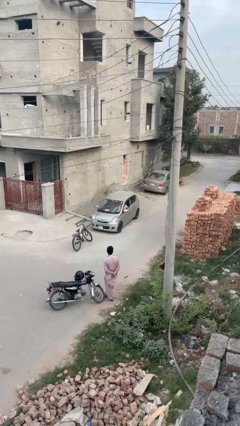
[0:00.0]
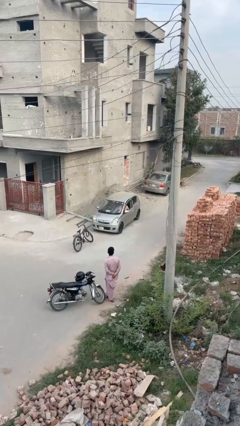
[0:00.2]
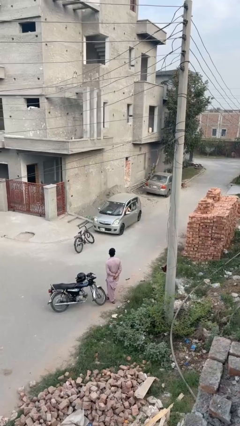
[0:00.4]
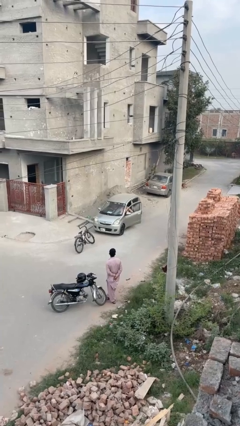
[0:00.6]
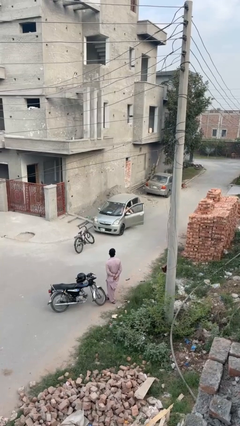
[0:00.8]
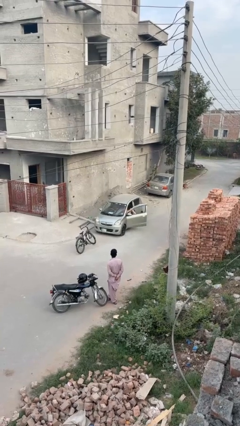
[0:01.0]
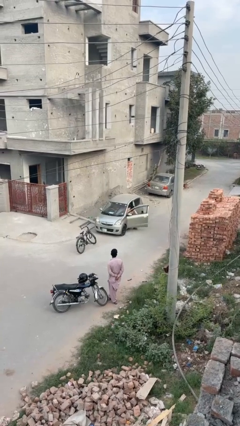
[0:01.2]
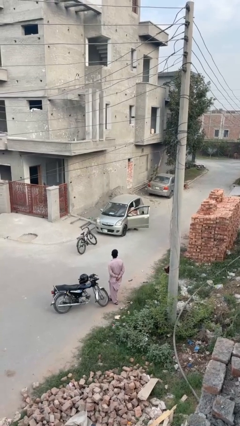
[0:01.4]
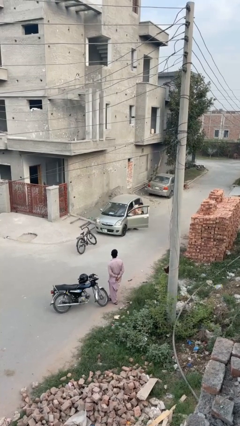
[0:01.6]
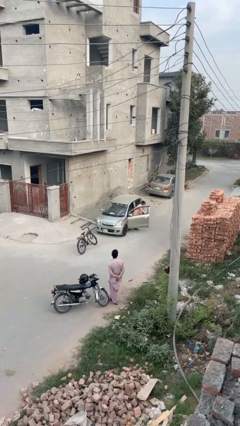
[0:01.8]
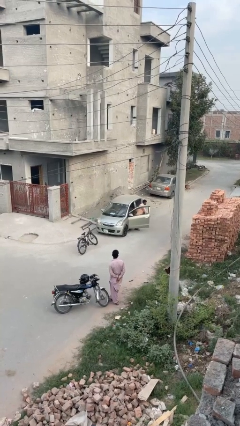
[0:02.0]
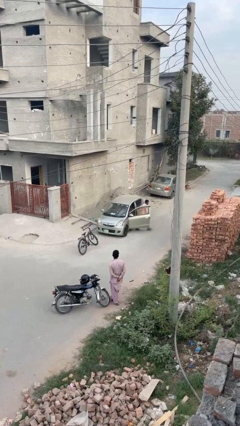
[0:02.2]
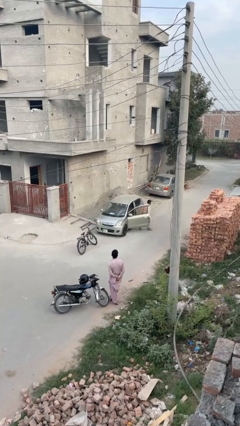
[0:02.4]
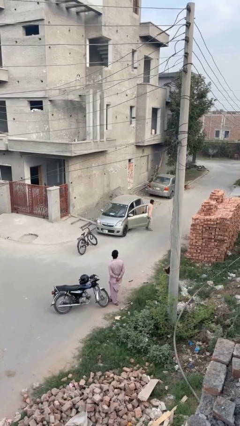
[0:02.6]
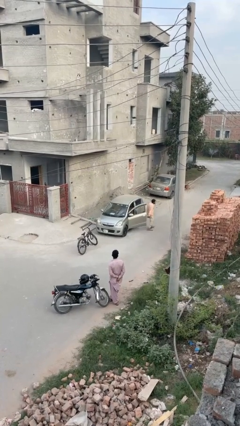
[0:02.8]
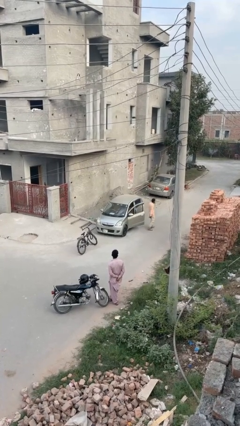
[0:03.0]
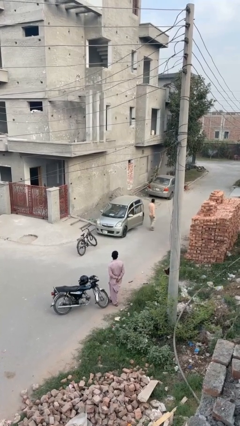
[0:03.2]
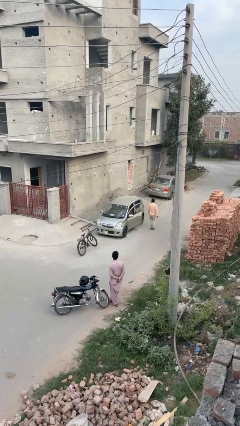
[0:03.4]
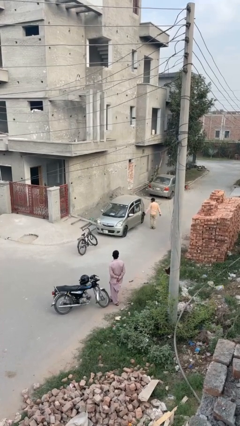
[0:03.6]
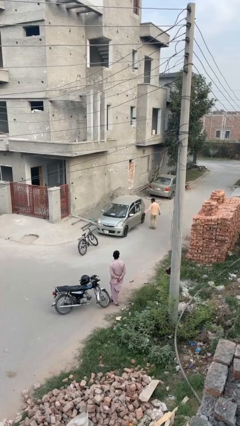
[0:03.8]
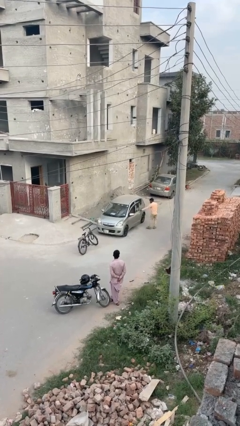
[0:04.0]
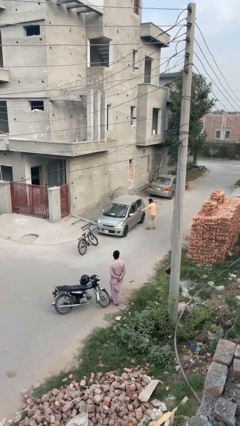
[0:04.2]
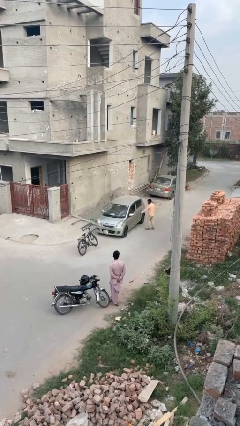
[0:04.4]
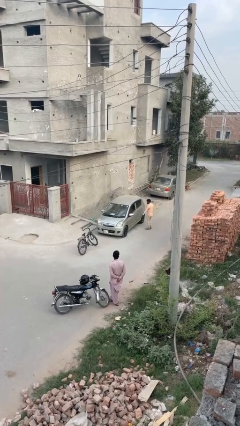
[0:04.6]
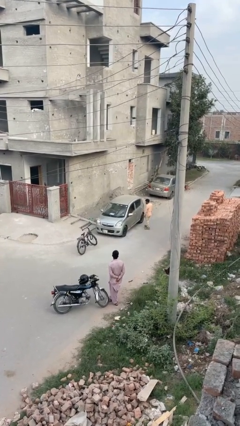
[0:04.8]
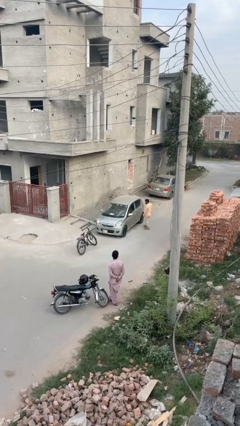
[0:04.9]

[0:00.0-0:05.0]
car drops off person

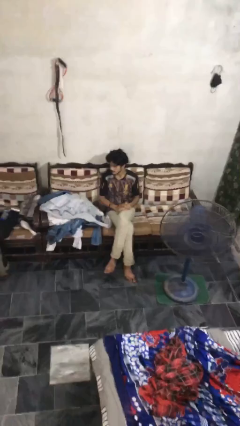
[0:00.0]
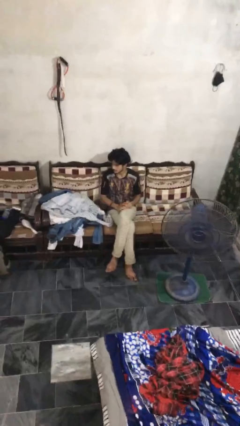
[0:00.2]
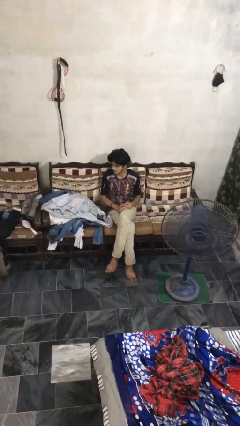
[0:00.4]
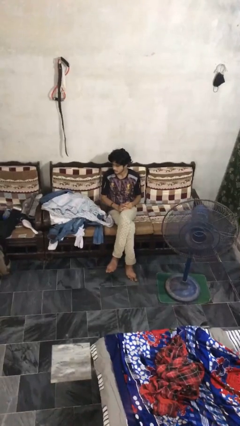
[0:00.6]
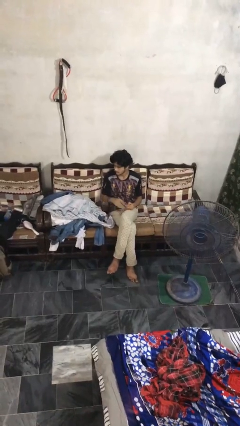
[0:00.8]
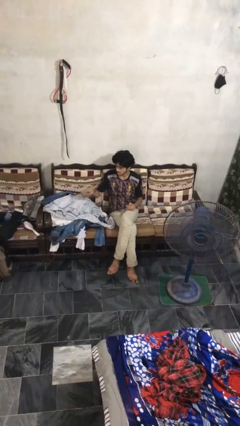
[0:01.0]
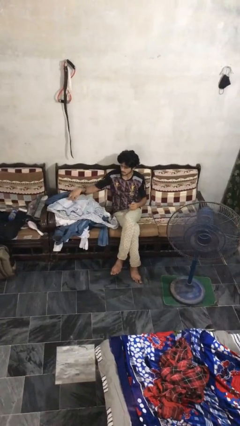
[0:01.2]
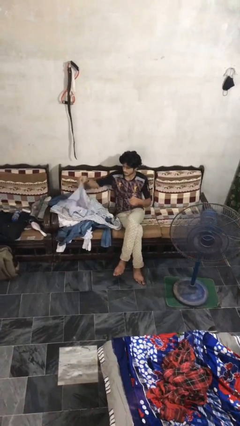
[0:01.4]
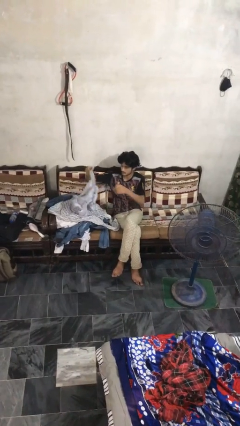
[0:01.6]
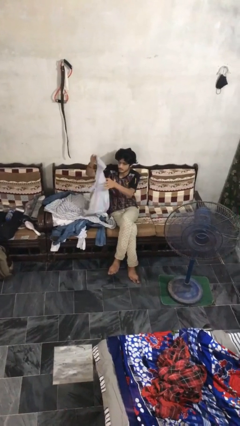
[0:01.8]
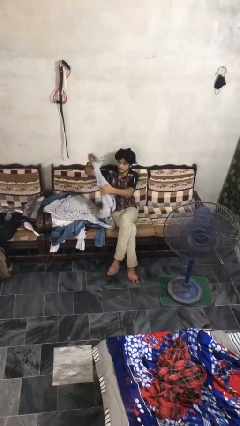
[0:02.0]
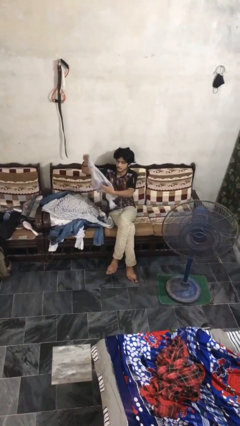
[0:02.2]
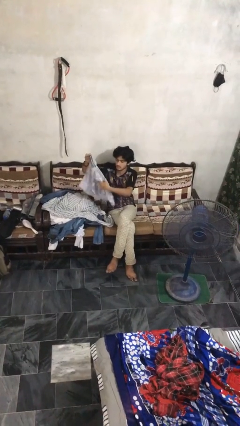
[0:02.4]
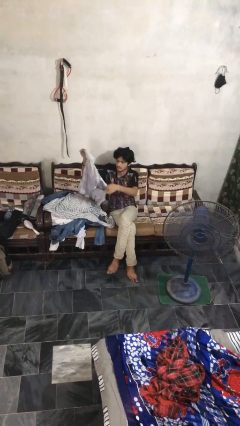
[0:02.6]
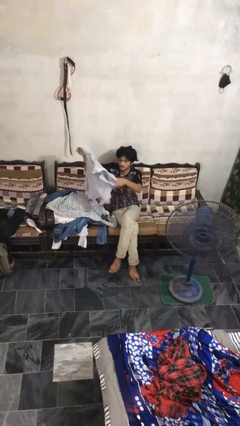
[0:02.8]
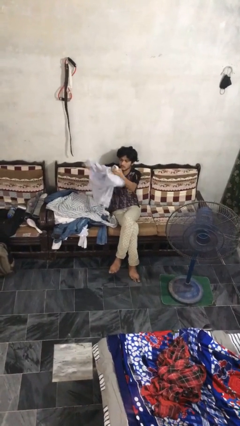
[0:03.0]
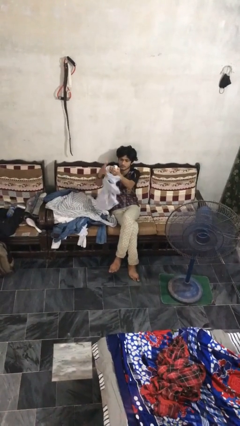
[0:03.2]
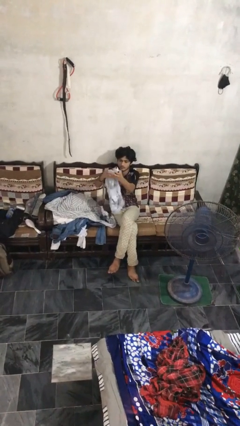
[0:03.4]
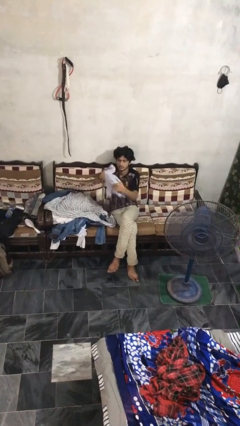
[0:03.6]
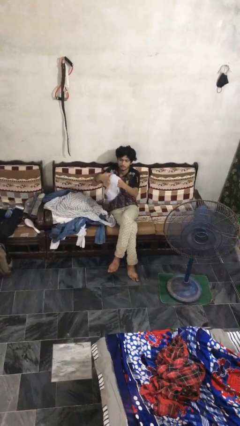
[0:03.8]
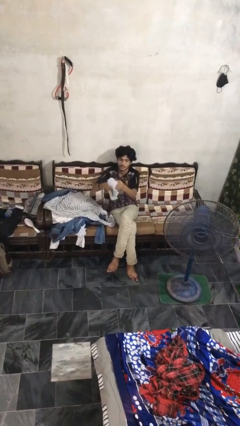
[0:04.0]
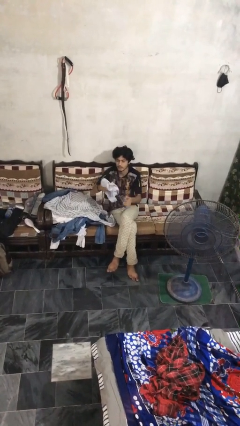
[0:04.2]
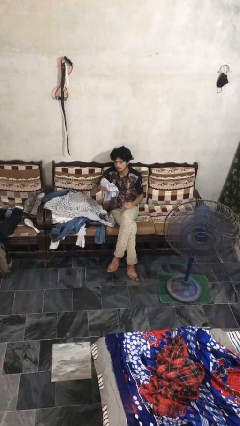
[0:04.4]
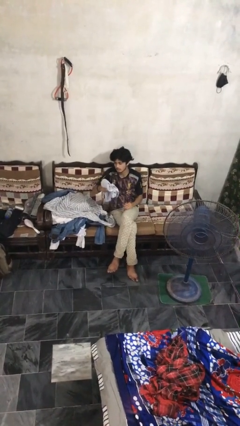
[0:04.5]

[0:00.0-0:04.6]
person folds shirt

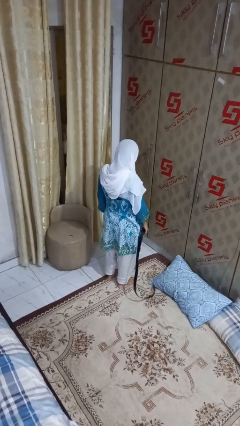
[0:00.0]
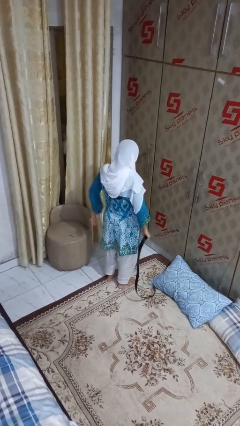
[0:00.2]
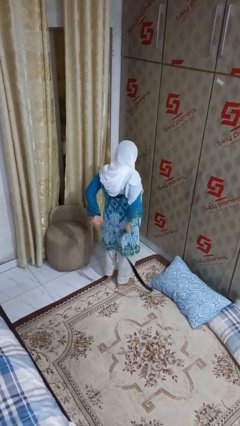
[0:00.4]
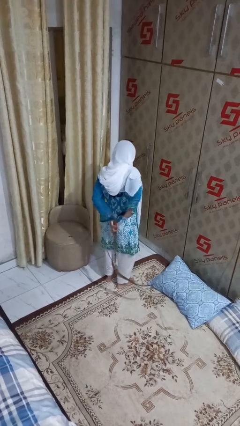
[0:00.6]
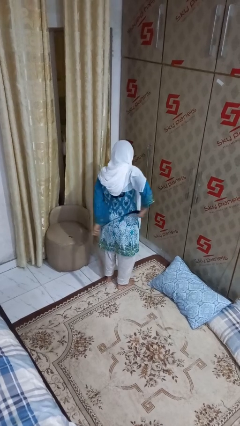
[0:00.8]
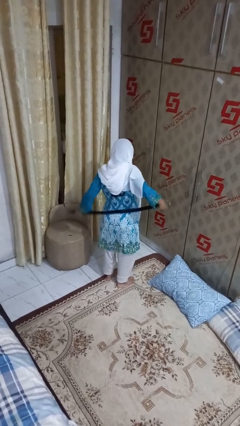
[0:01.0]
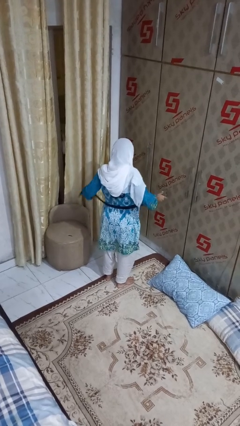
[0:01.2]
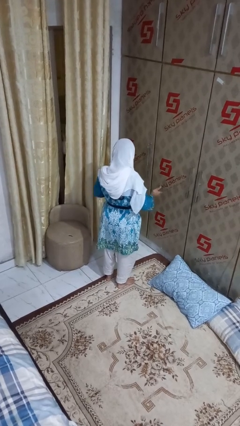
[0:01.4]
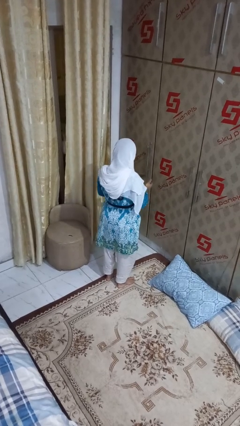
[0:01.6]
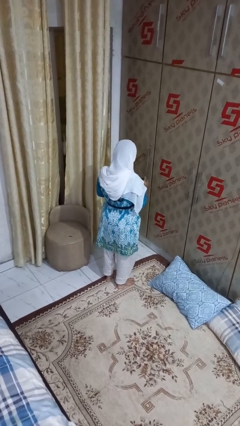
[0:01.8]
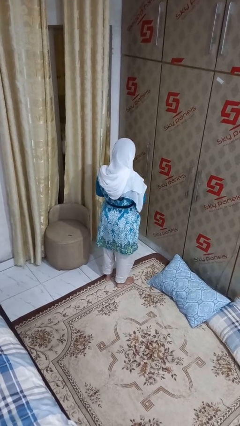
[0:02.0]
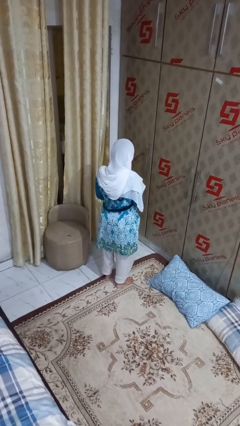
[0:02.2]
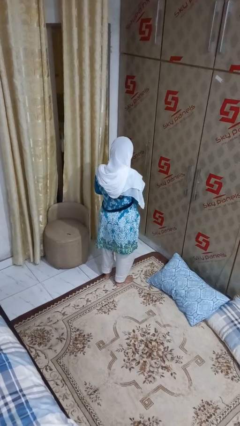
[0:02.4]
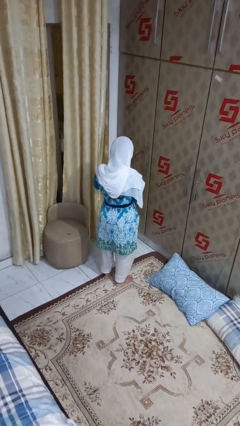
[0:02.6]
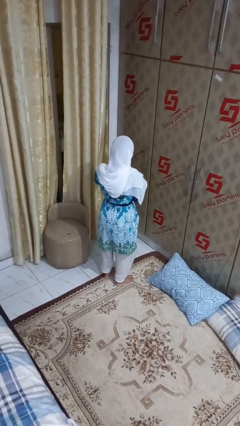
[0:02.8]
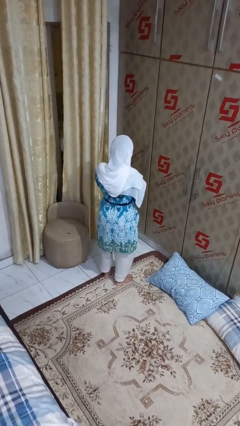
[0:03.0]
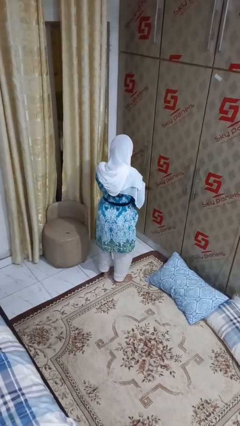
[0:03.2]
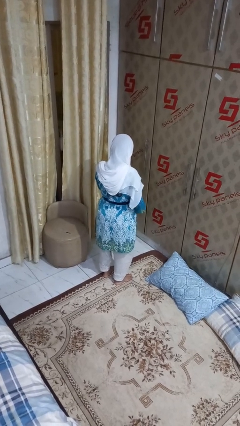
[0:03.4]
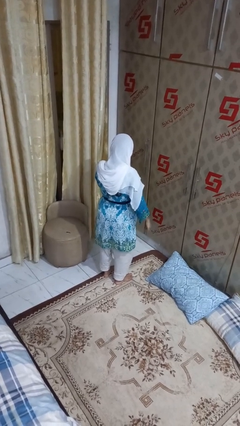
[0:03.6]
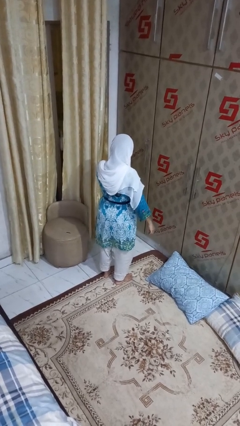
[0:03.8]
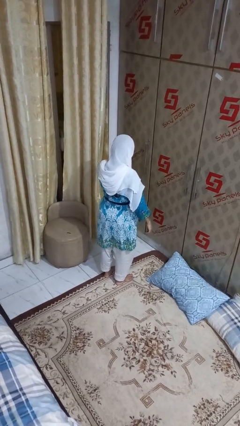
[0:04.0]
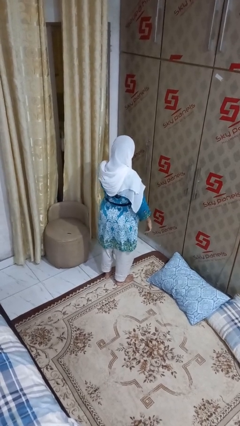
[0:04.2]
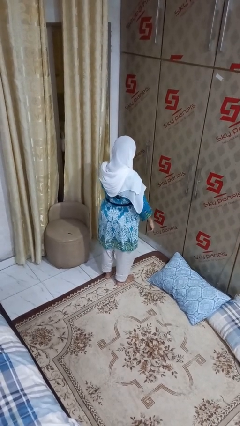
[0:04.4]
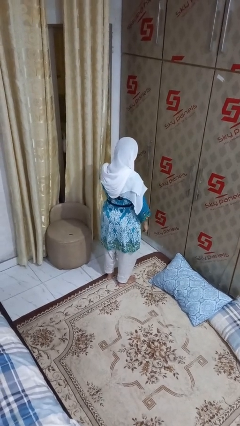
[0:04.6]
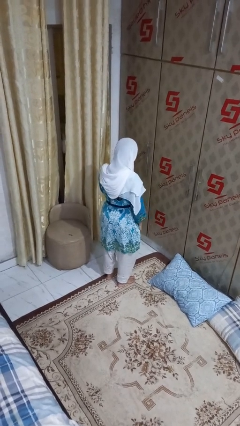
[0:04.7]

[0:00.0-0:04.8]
person puts on belt

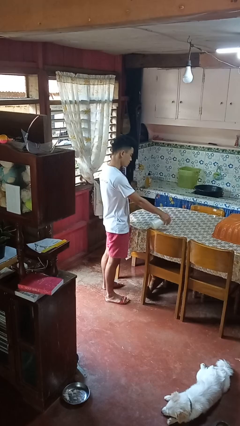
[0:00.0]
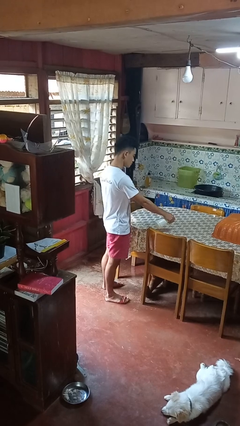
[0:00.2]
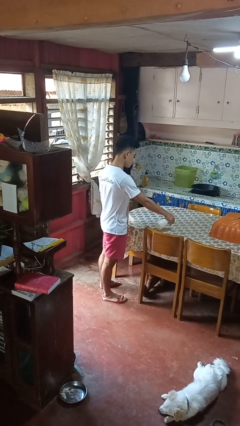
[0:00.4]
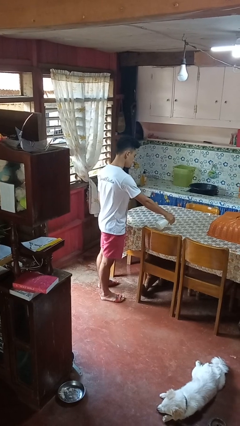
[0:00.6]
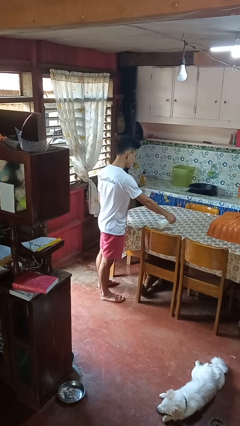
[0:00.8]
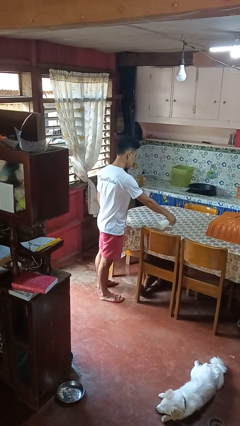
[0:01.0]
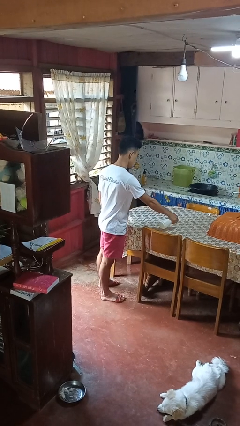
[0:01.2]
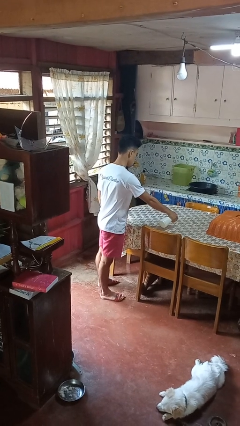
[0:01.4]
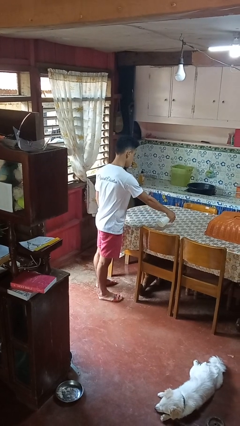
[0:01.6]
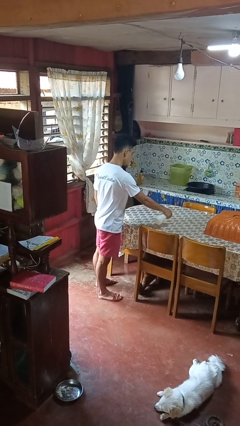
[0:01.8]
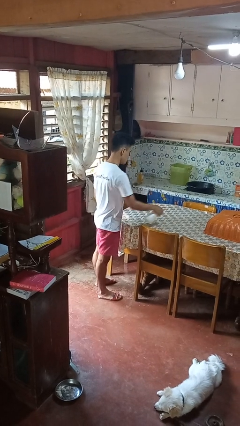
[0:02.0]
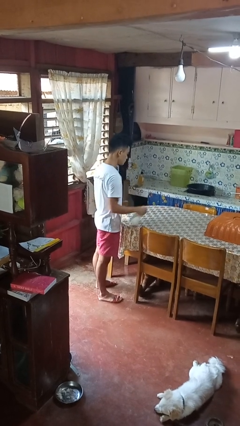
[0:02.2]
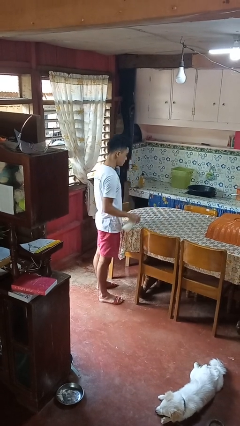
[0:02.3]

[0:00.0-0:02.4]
person sprays from bottle

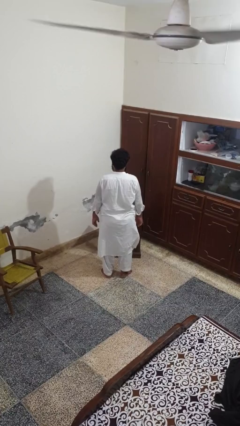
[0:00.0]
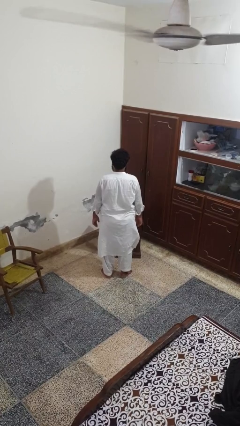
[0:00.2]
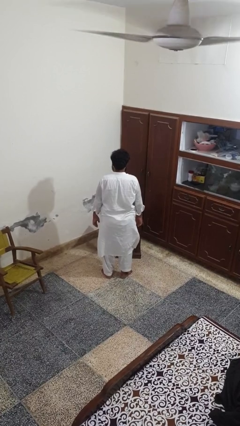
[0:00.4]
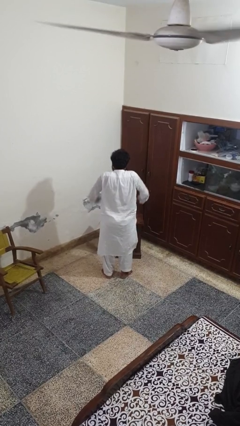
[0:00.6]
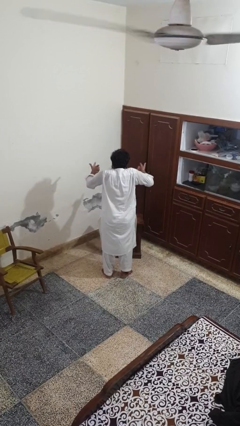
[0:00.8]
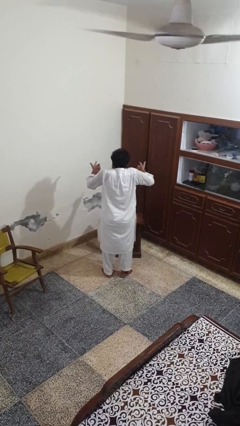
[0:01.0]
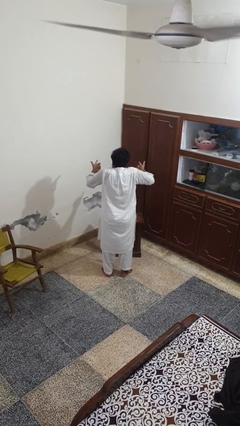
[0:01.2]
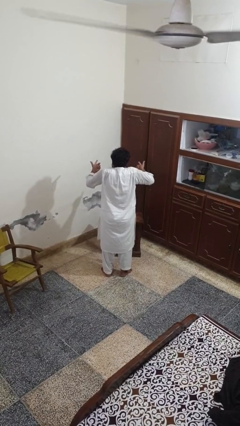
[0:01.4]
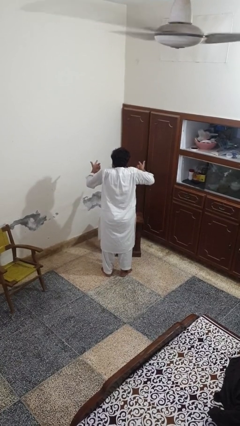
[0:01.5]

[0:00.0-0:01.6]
person shrugs
